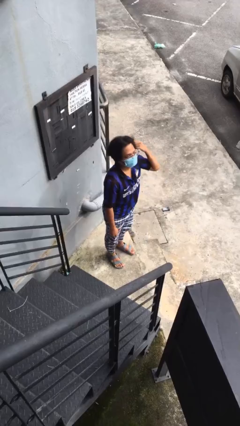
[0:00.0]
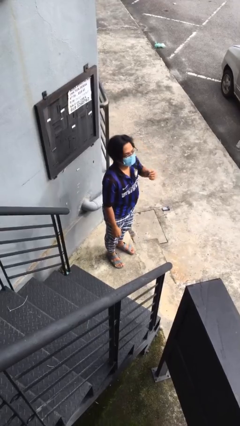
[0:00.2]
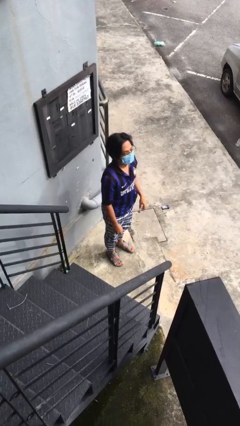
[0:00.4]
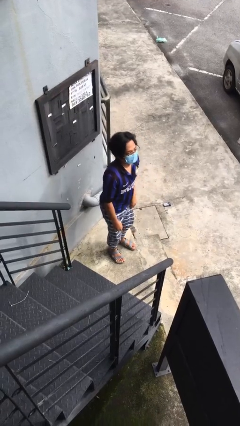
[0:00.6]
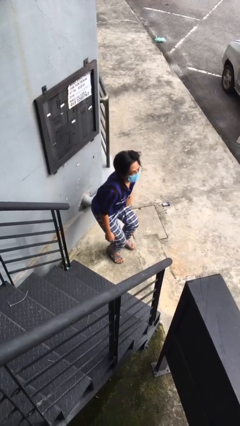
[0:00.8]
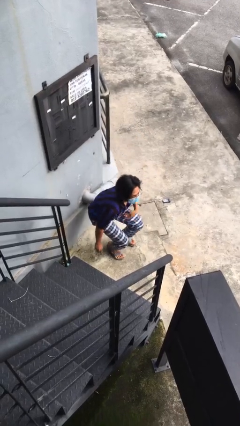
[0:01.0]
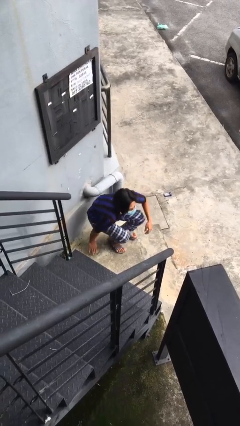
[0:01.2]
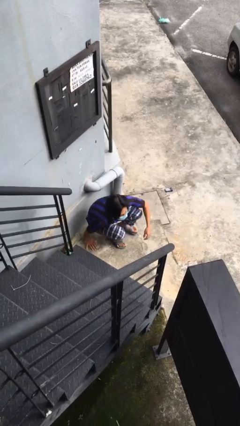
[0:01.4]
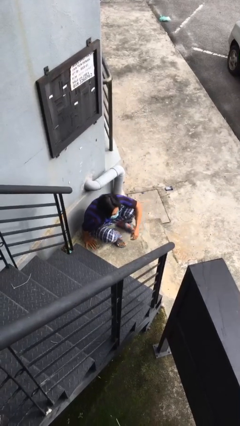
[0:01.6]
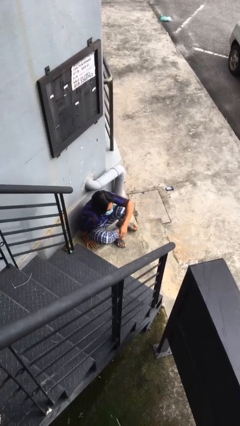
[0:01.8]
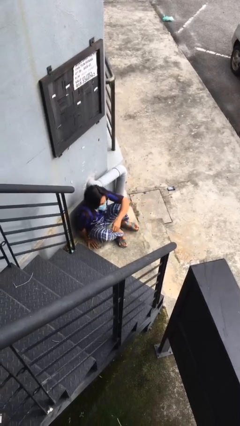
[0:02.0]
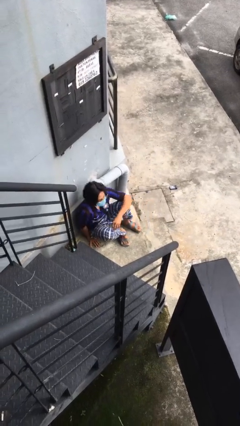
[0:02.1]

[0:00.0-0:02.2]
person sits down

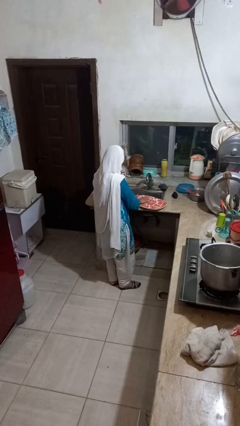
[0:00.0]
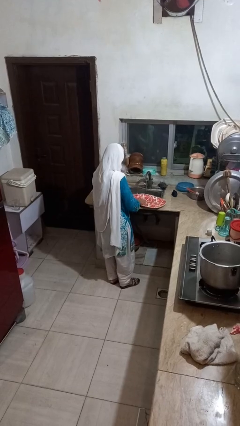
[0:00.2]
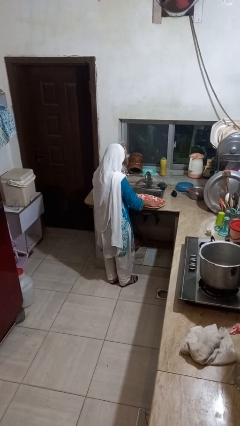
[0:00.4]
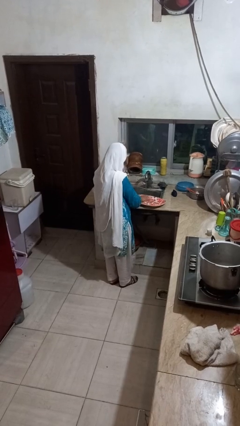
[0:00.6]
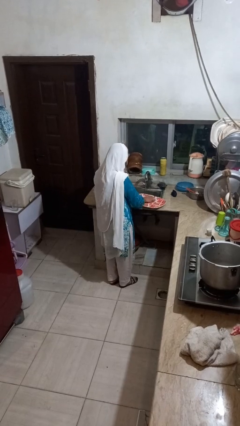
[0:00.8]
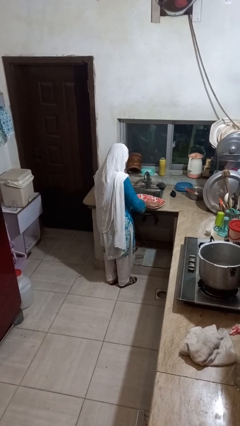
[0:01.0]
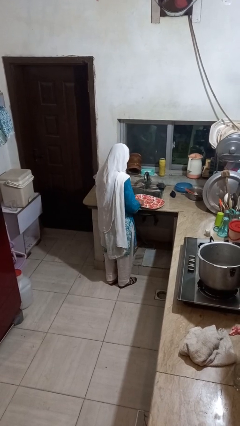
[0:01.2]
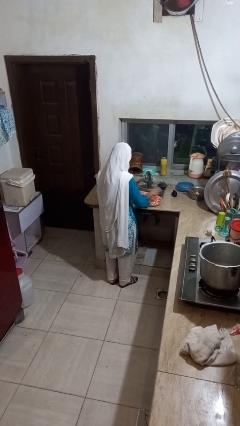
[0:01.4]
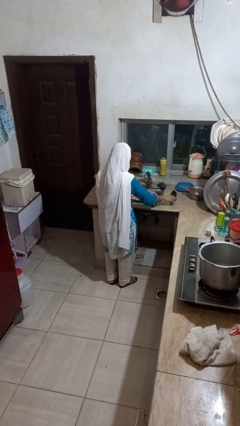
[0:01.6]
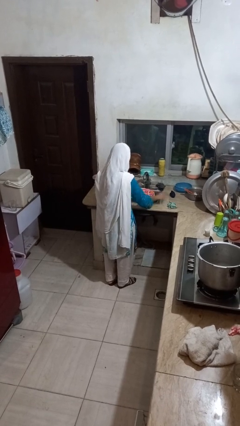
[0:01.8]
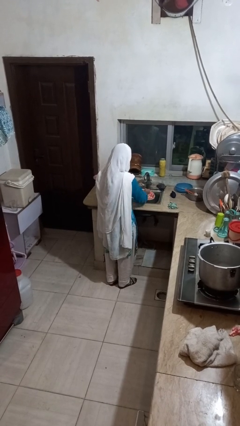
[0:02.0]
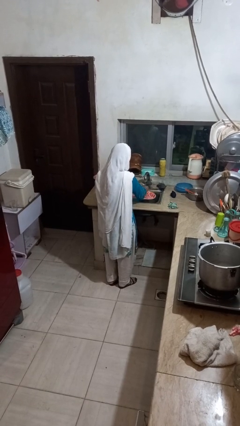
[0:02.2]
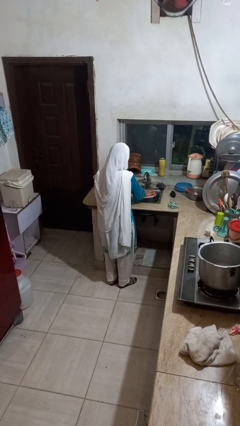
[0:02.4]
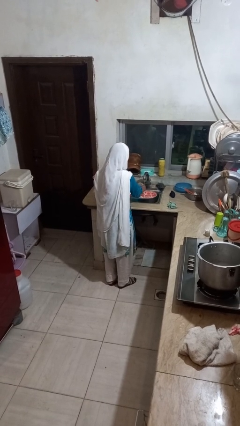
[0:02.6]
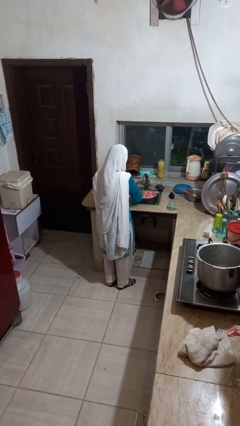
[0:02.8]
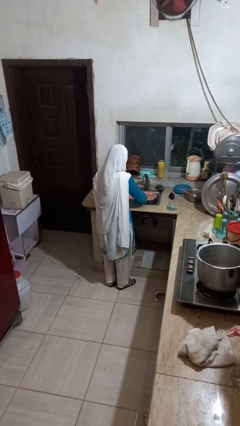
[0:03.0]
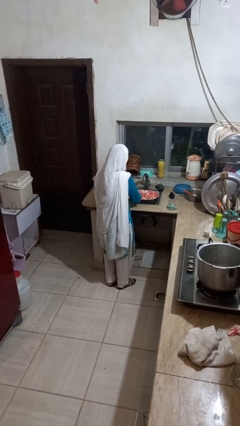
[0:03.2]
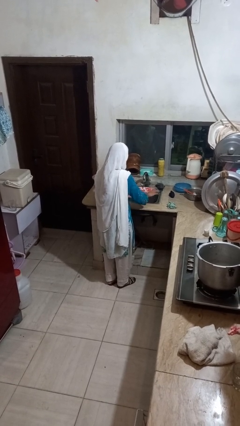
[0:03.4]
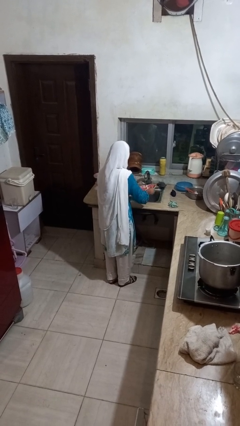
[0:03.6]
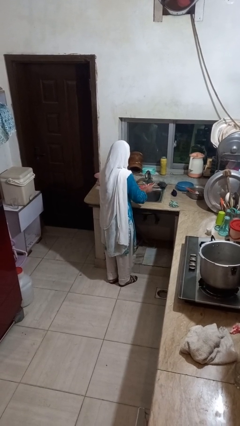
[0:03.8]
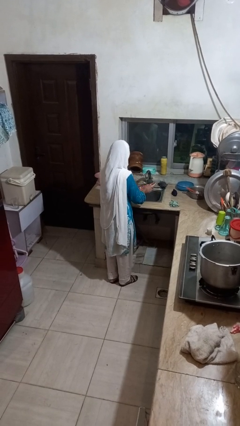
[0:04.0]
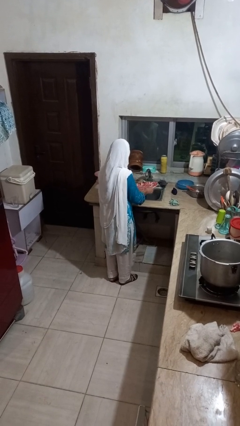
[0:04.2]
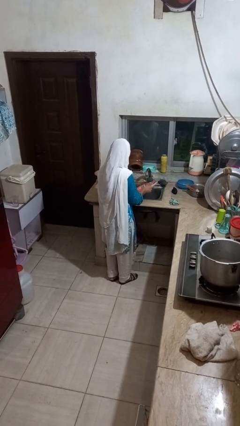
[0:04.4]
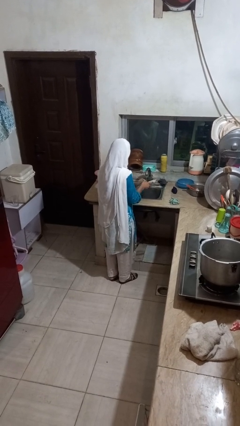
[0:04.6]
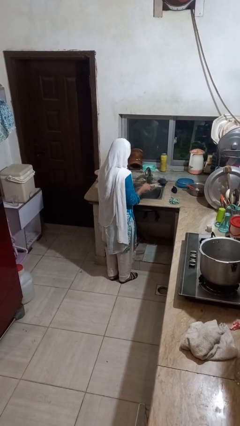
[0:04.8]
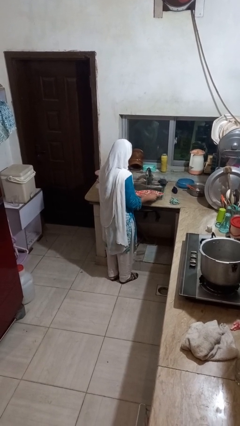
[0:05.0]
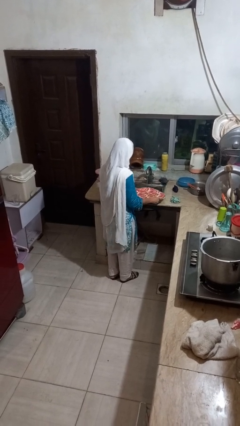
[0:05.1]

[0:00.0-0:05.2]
person washes dish

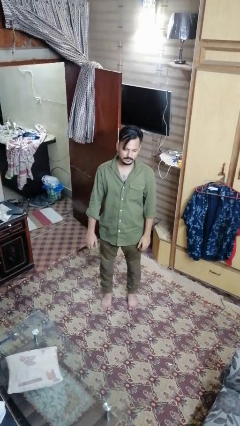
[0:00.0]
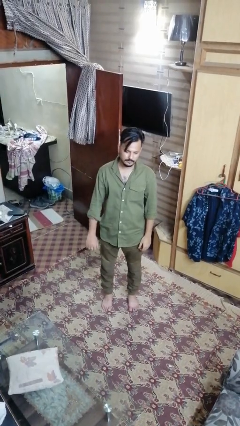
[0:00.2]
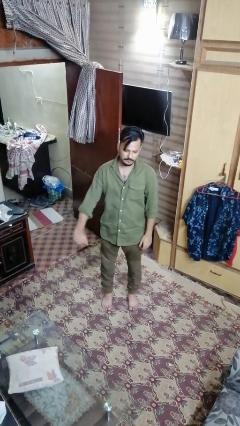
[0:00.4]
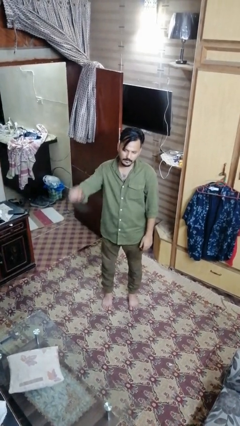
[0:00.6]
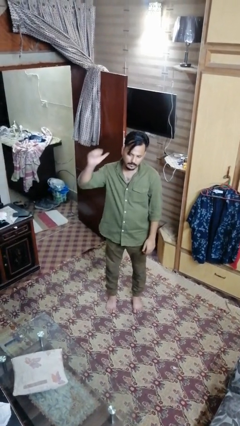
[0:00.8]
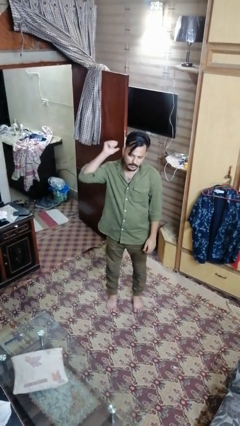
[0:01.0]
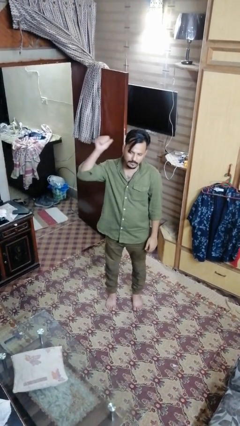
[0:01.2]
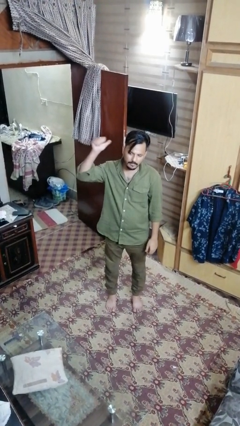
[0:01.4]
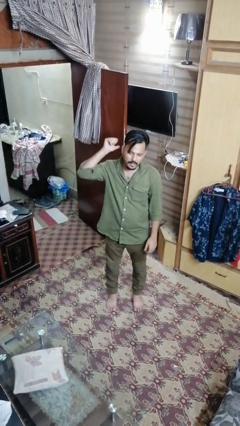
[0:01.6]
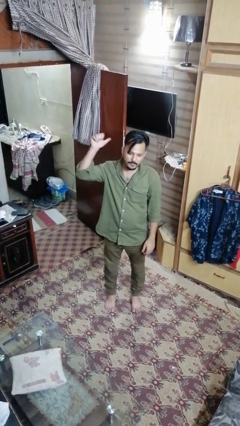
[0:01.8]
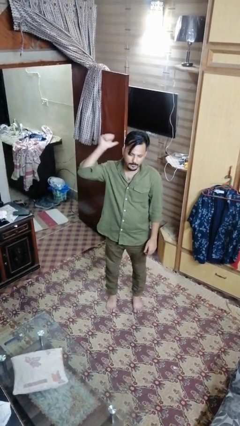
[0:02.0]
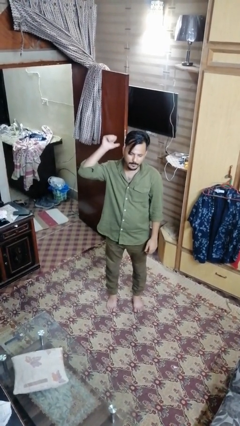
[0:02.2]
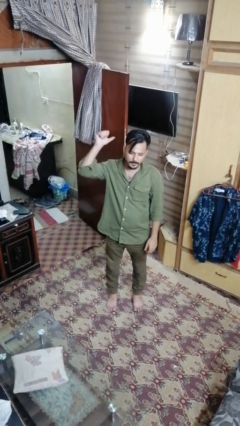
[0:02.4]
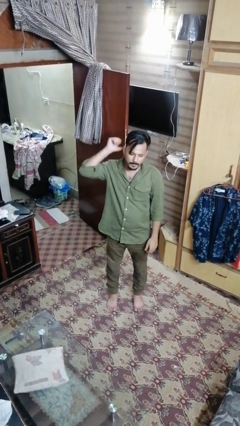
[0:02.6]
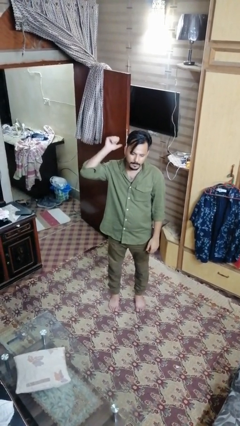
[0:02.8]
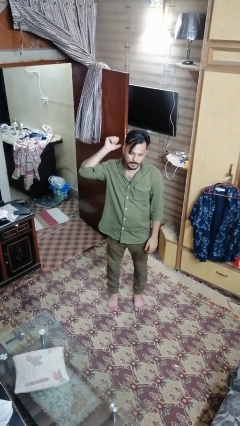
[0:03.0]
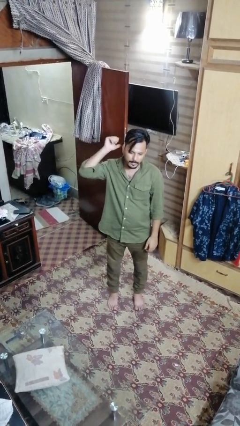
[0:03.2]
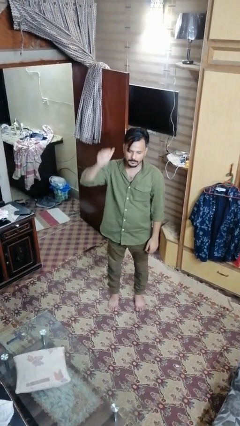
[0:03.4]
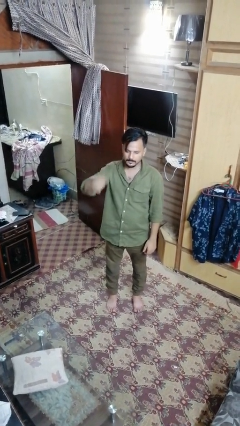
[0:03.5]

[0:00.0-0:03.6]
person gestures behind me

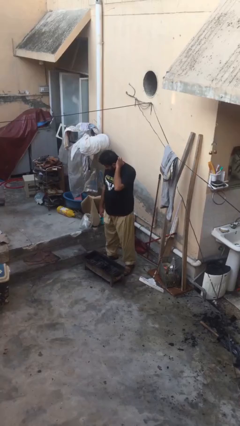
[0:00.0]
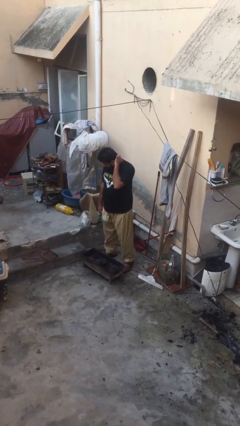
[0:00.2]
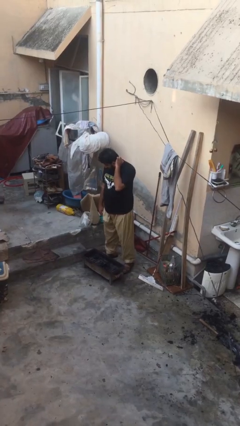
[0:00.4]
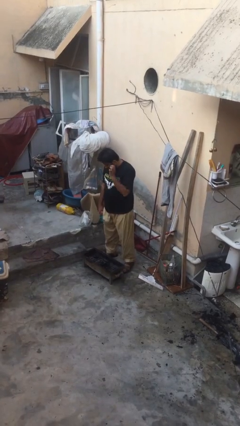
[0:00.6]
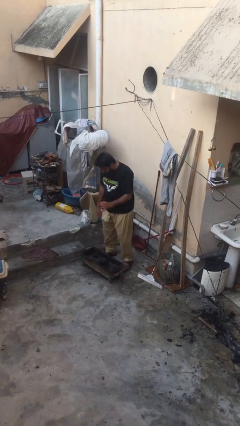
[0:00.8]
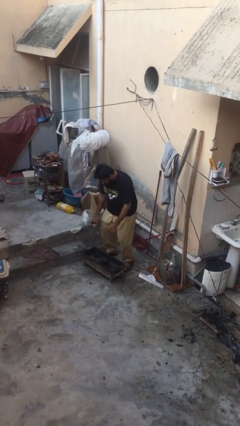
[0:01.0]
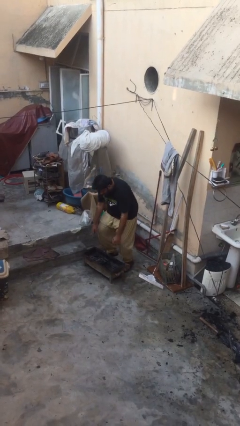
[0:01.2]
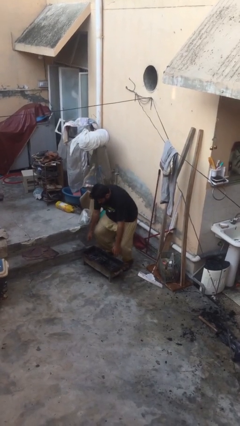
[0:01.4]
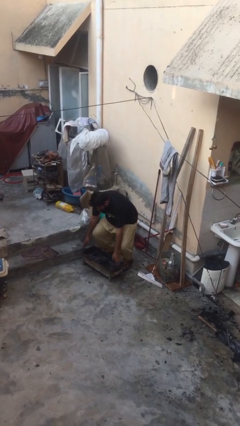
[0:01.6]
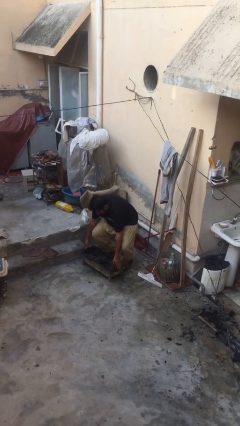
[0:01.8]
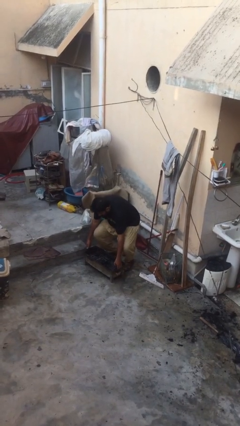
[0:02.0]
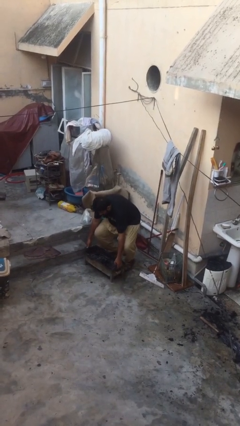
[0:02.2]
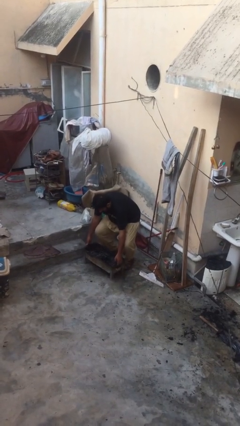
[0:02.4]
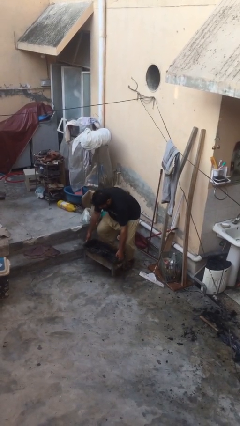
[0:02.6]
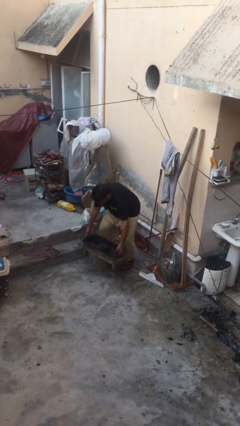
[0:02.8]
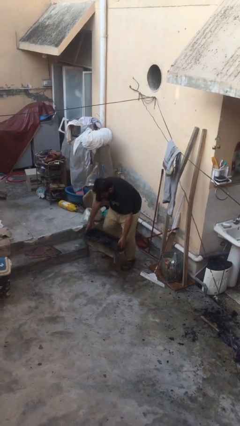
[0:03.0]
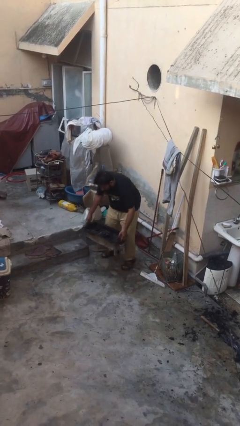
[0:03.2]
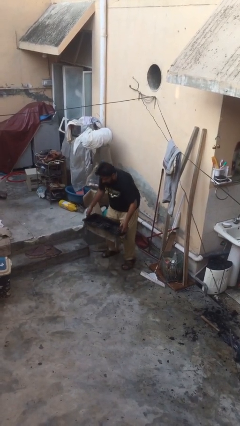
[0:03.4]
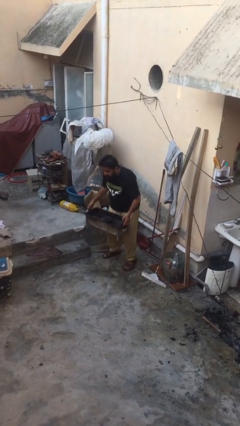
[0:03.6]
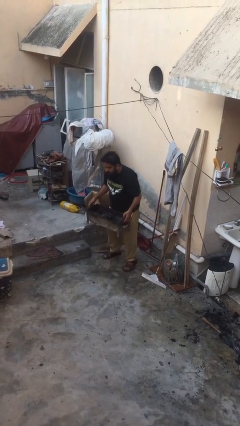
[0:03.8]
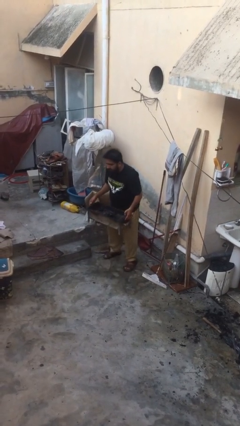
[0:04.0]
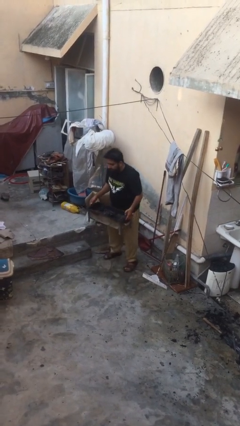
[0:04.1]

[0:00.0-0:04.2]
person picks up object from floor

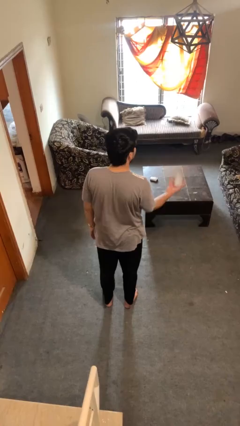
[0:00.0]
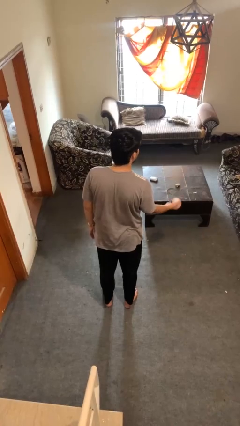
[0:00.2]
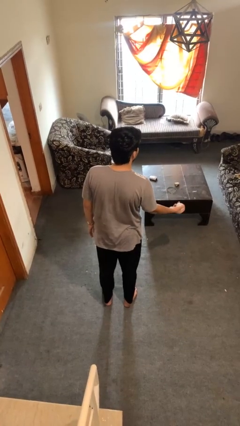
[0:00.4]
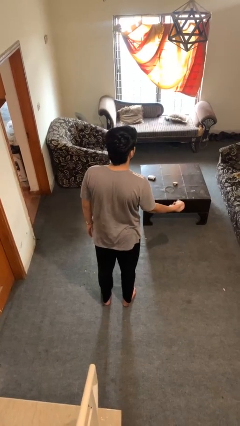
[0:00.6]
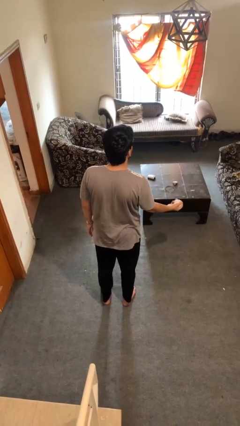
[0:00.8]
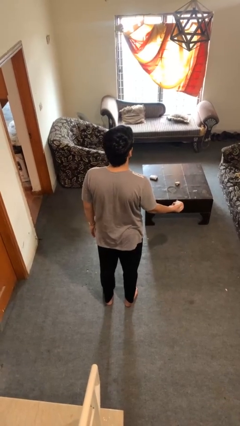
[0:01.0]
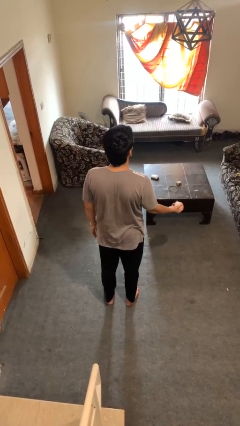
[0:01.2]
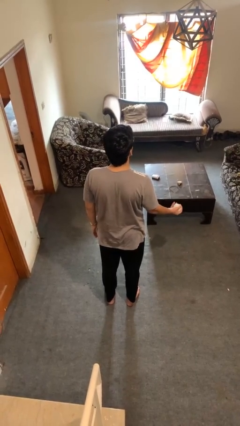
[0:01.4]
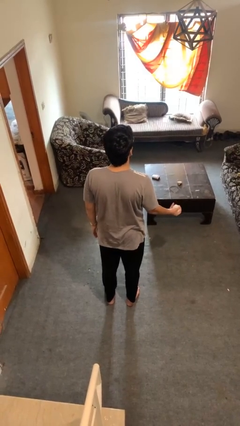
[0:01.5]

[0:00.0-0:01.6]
person catches dropped object

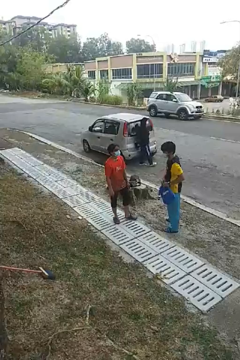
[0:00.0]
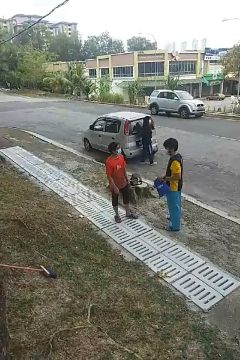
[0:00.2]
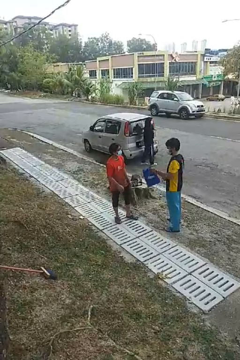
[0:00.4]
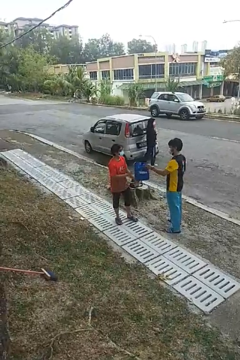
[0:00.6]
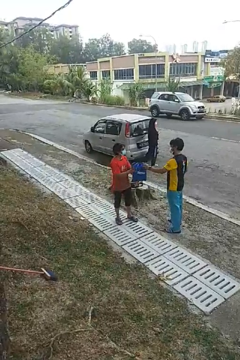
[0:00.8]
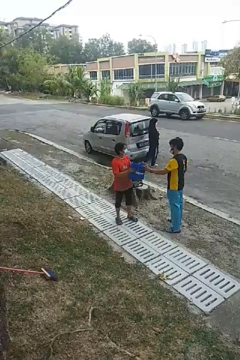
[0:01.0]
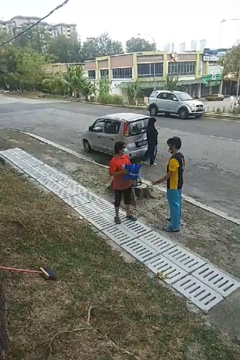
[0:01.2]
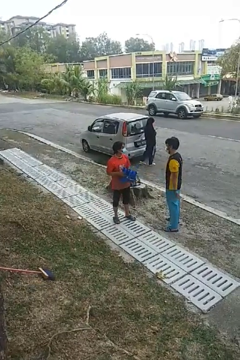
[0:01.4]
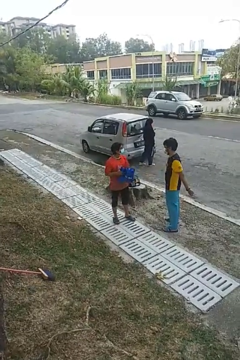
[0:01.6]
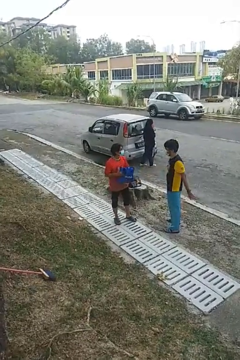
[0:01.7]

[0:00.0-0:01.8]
person transfers object to person
